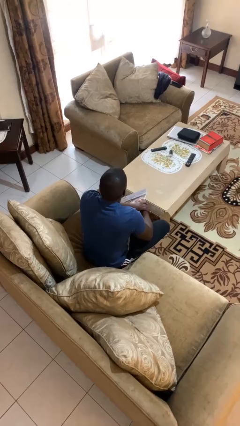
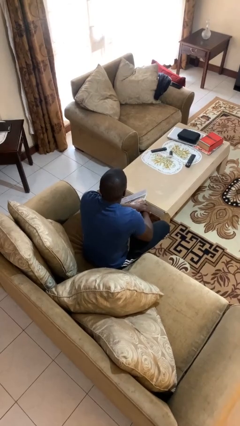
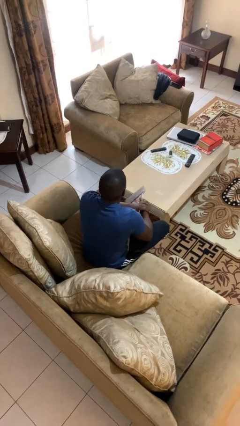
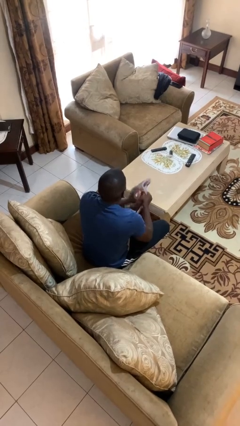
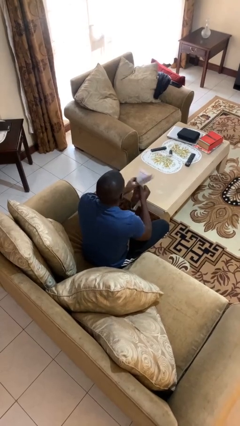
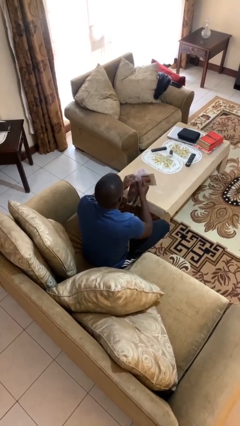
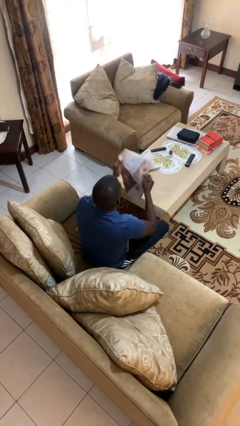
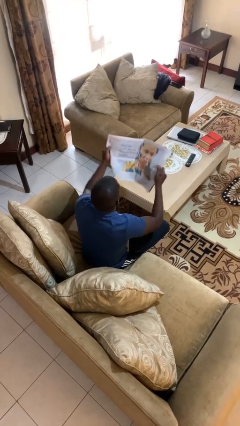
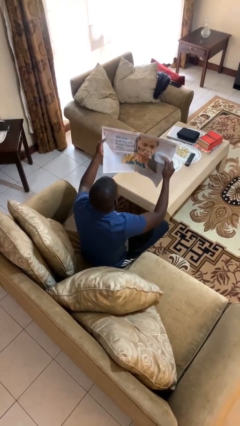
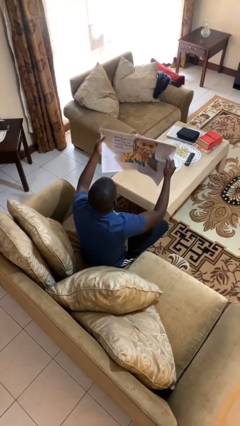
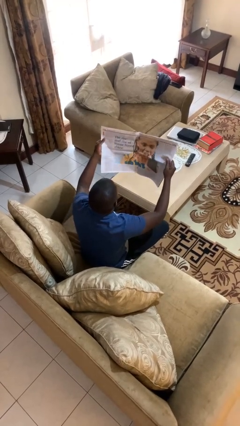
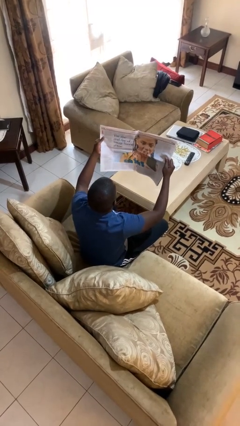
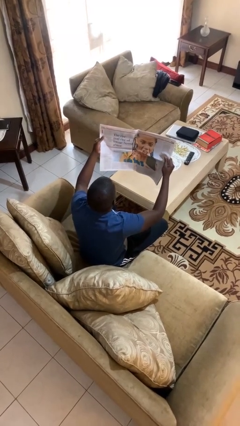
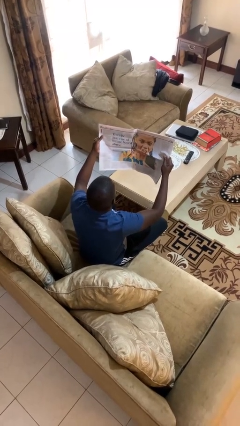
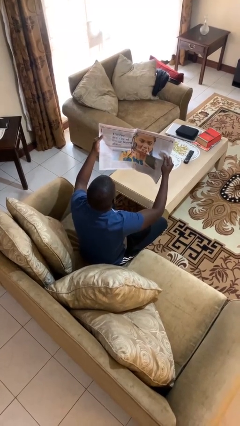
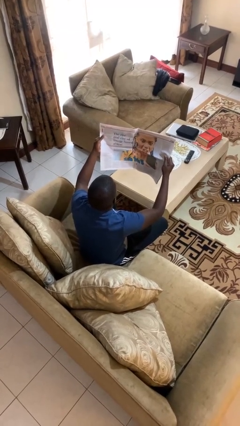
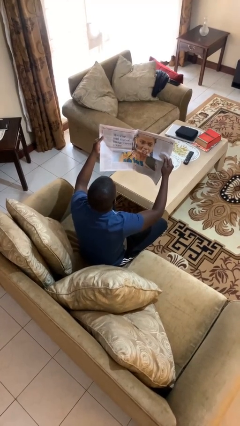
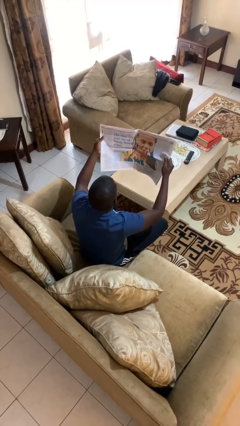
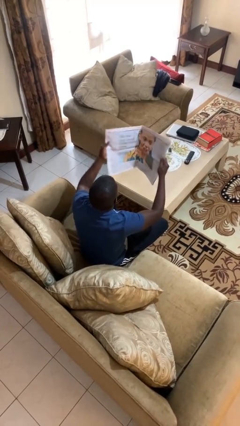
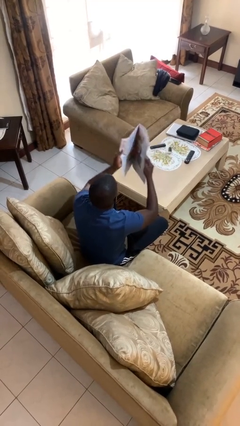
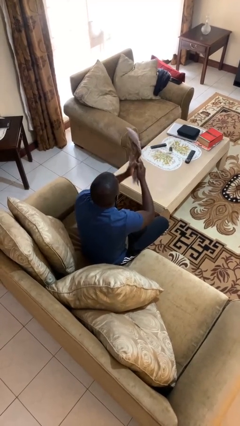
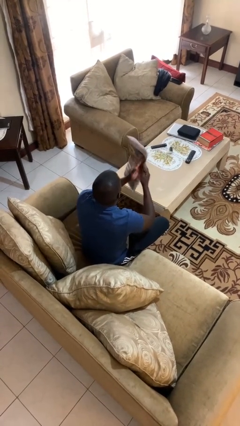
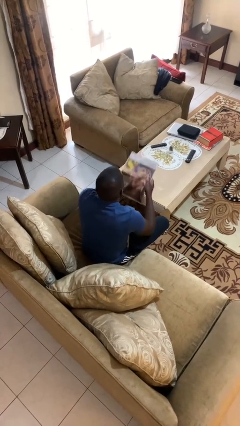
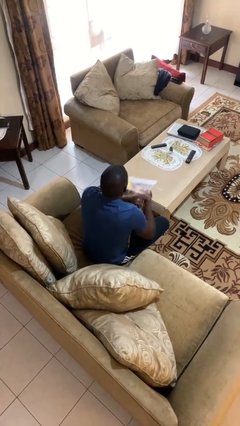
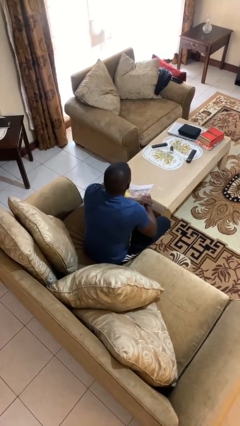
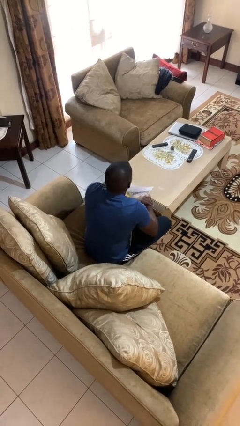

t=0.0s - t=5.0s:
person reads newspaper

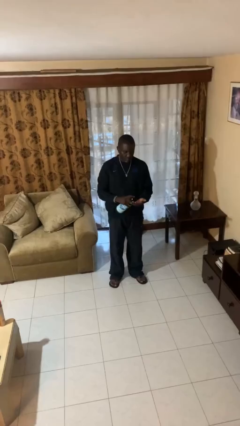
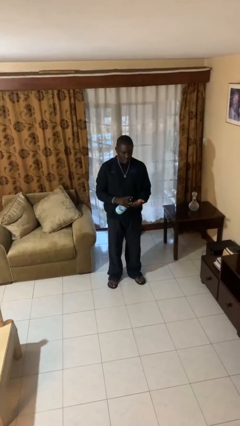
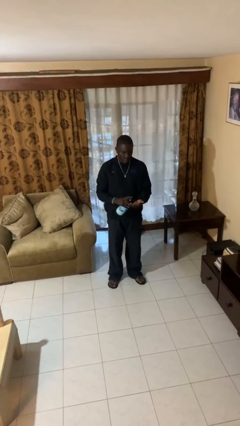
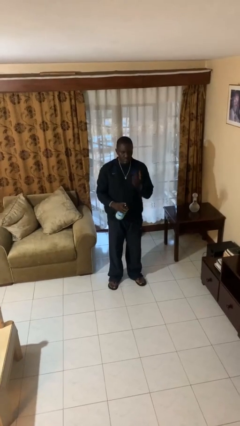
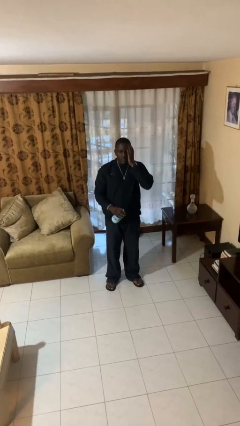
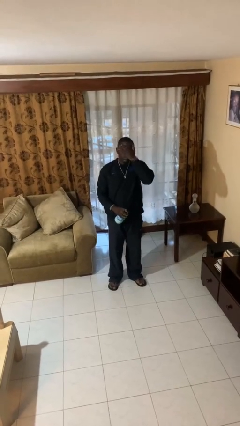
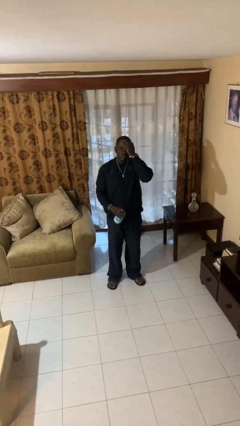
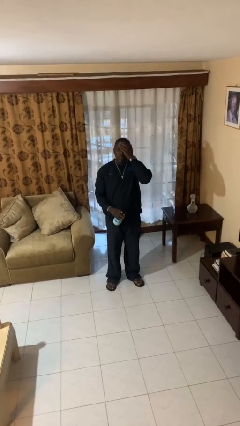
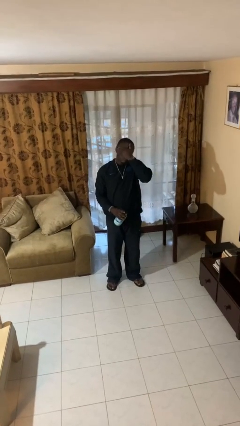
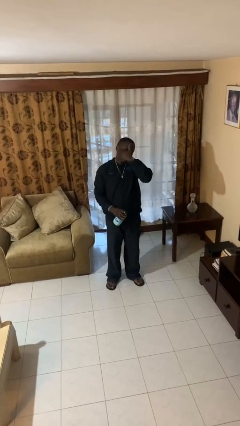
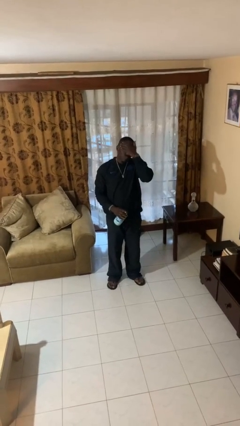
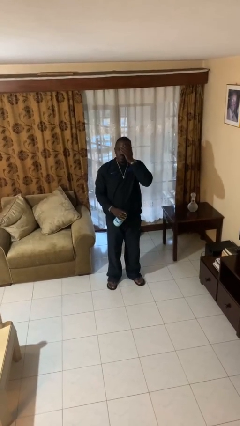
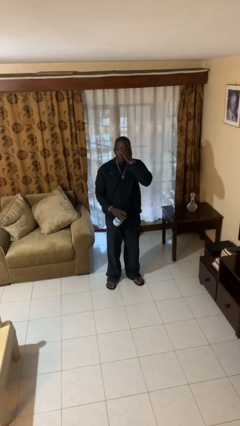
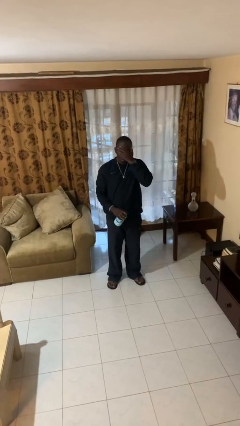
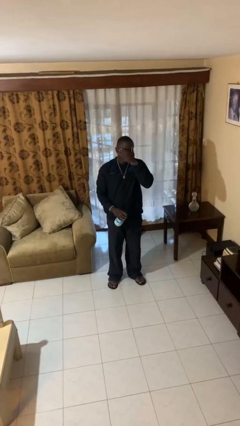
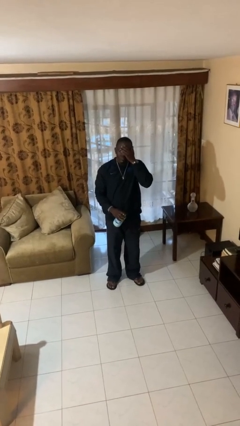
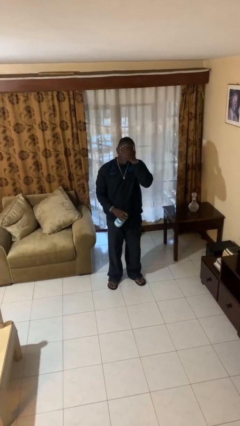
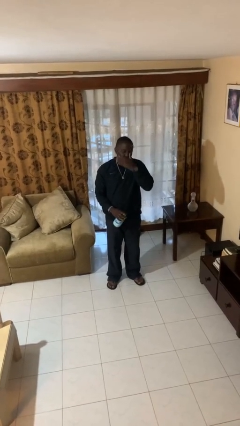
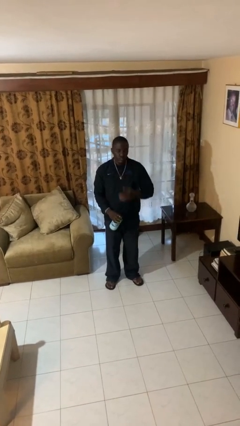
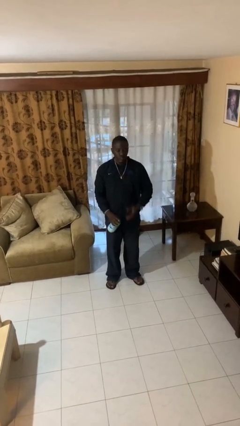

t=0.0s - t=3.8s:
person applies facial moisturizer

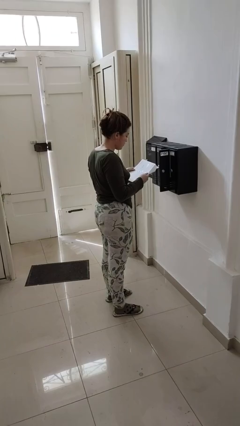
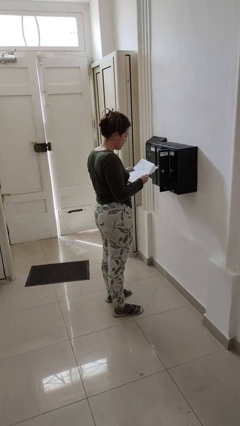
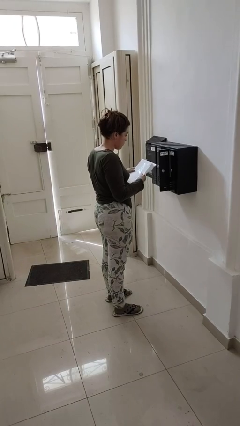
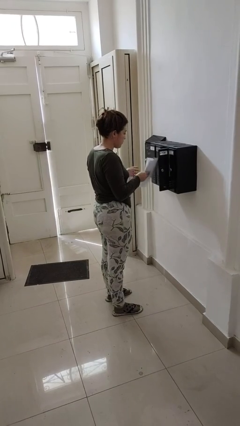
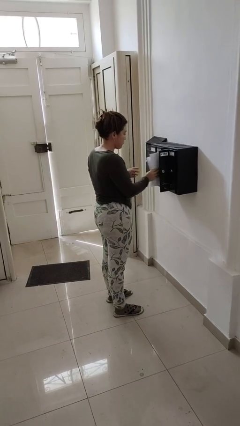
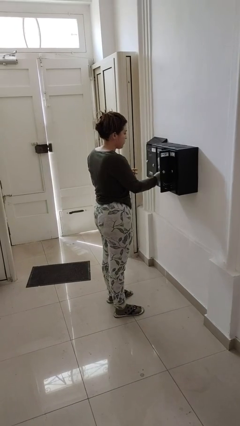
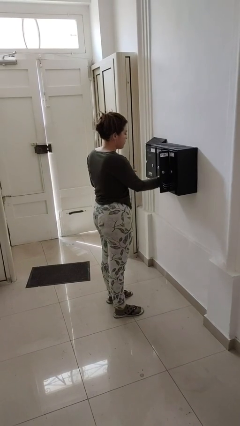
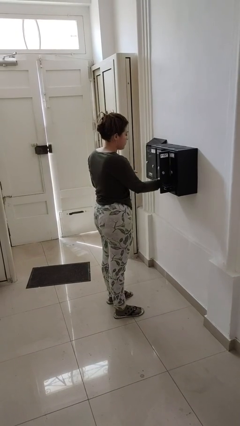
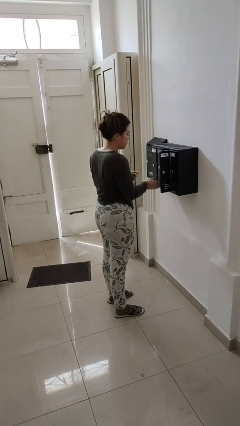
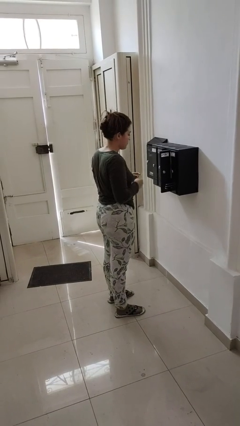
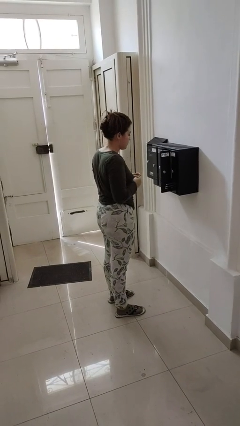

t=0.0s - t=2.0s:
person puts letters in mailbox

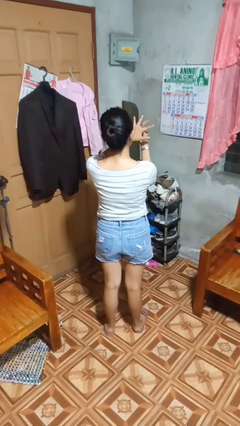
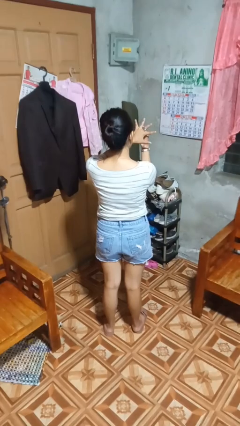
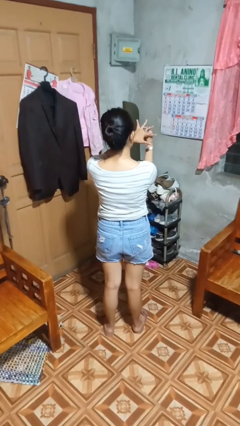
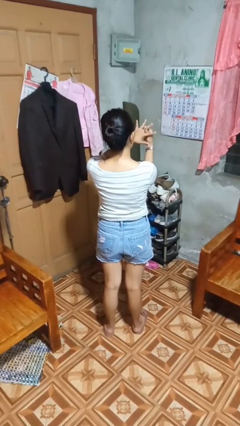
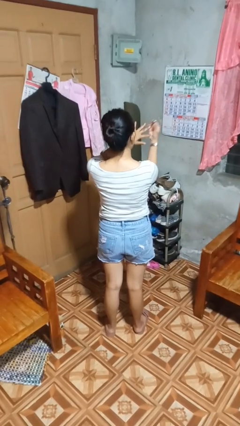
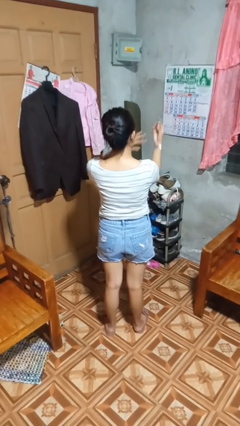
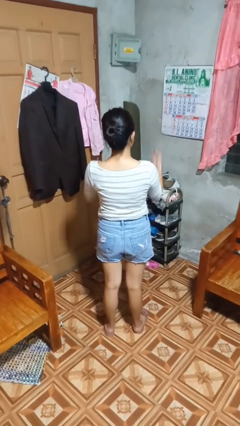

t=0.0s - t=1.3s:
person takes off ring

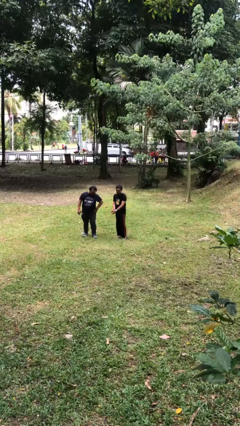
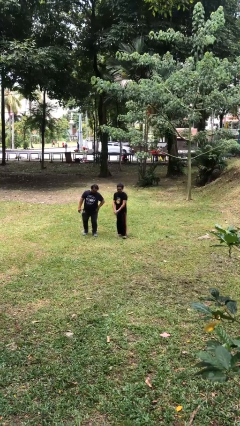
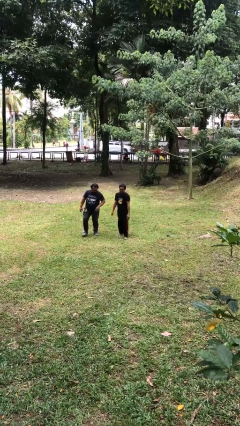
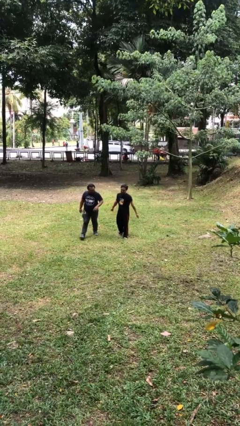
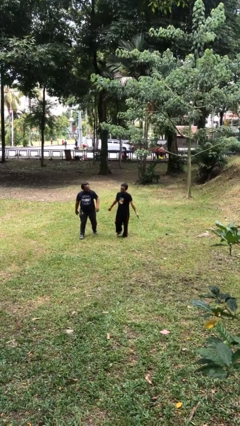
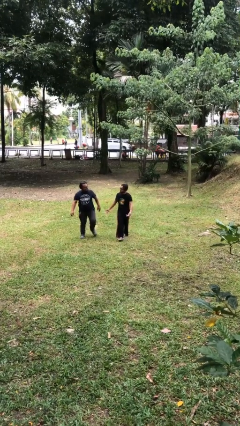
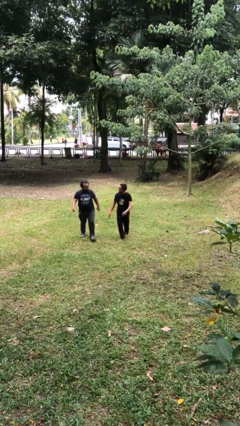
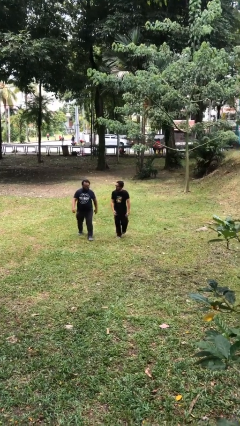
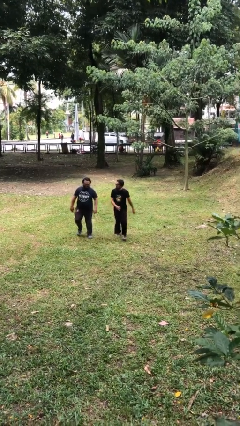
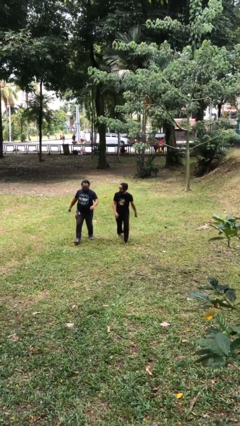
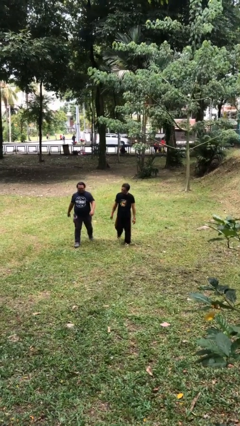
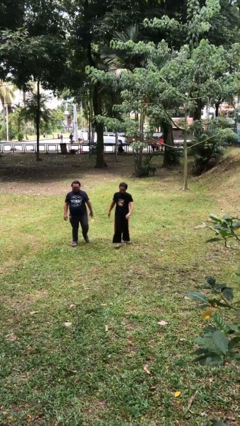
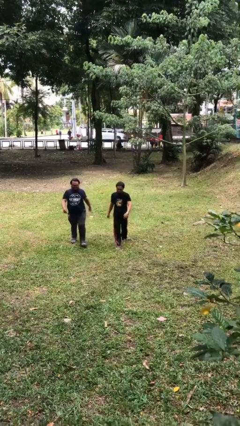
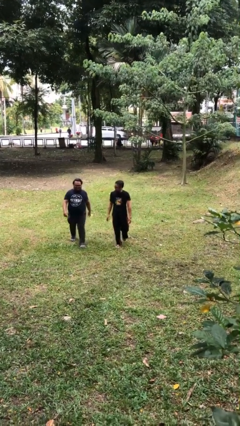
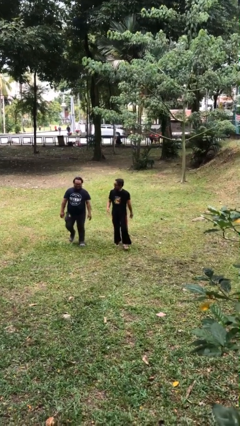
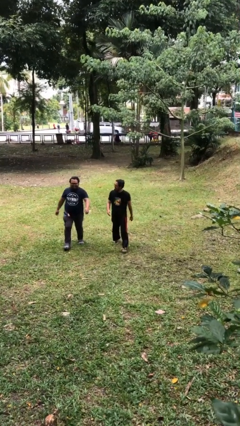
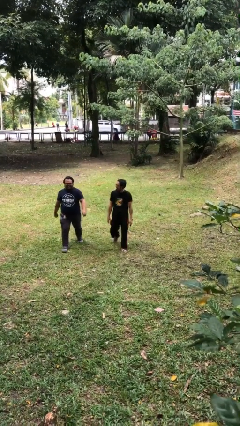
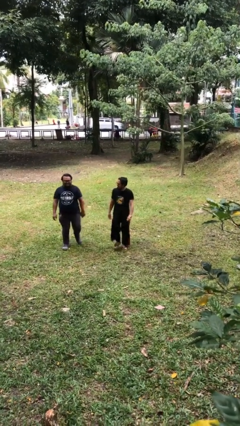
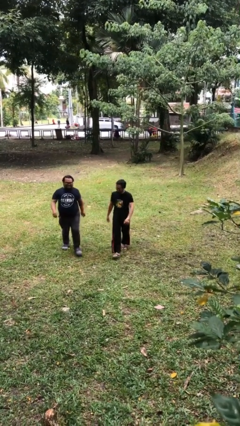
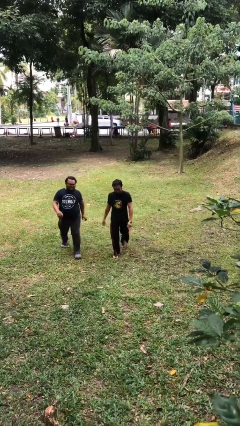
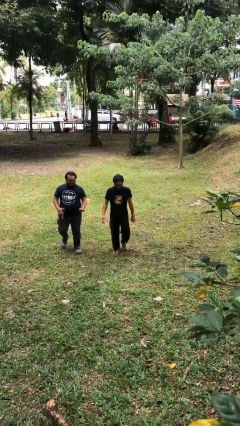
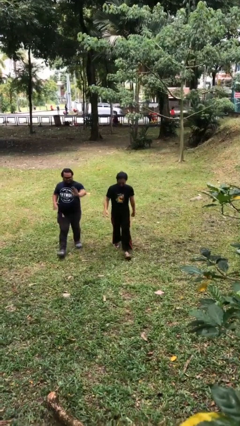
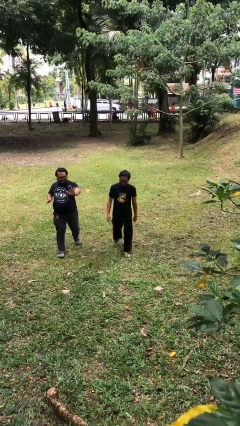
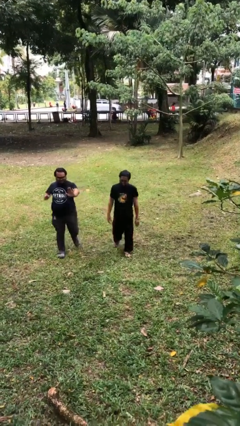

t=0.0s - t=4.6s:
person talks to person

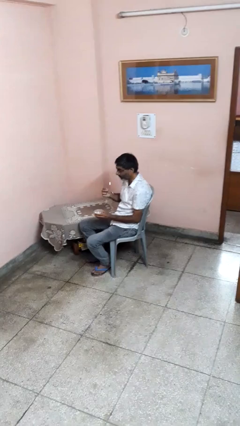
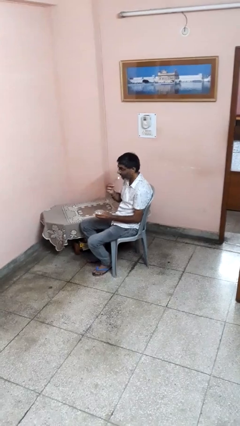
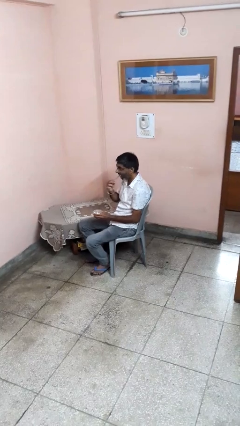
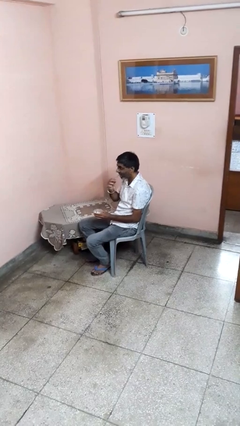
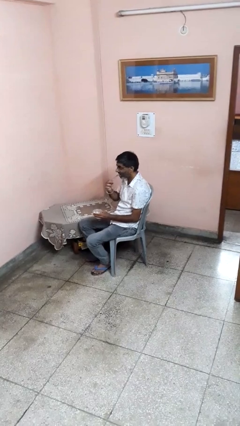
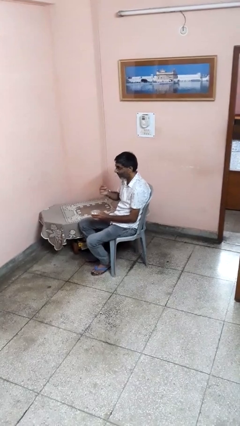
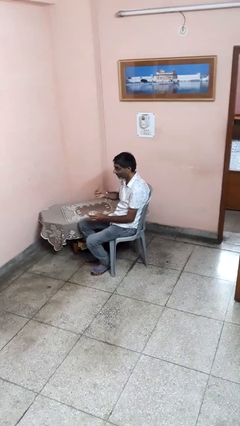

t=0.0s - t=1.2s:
person eats with utensil
